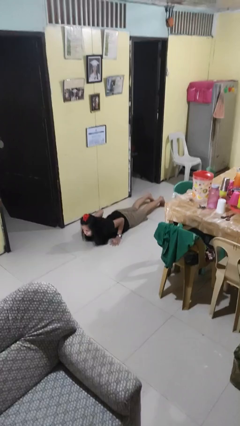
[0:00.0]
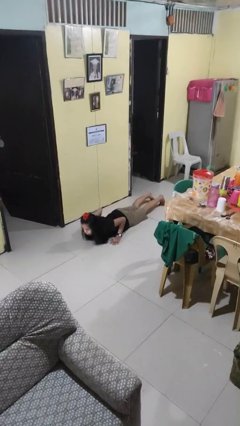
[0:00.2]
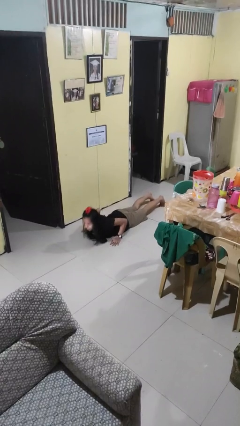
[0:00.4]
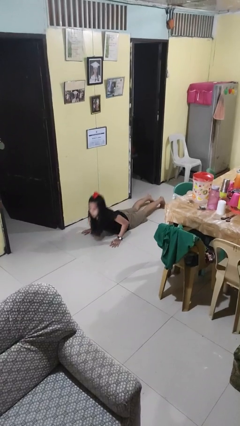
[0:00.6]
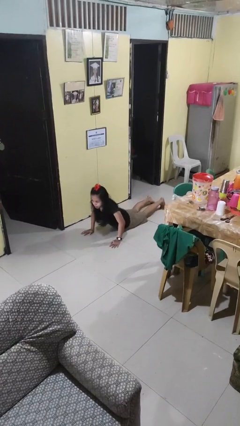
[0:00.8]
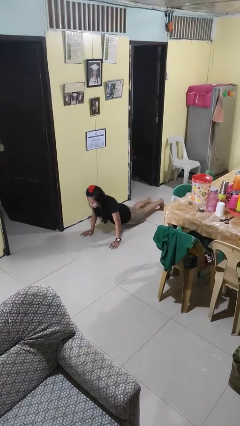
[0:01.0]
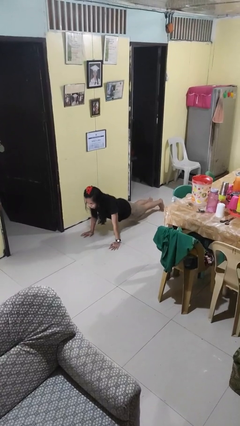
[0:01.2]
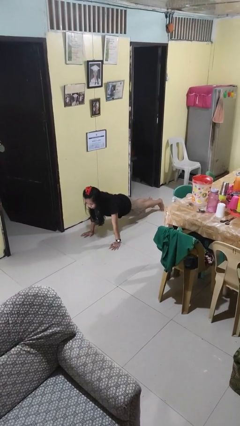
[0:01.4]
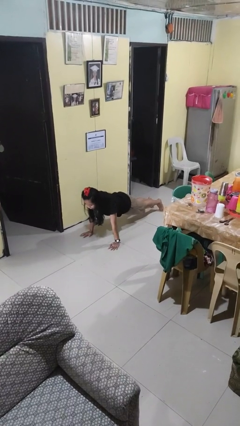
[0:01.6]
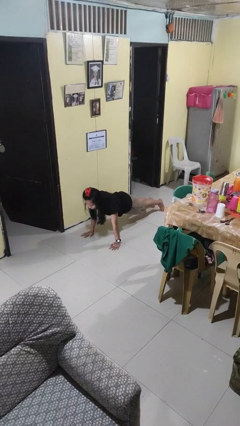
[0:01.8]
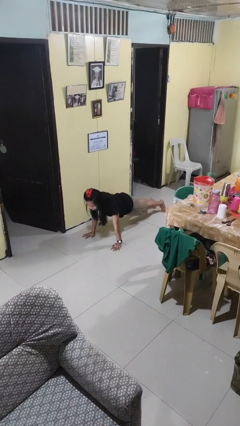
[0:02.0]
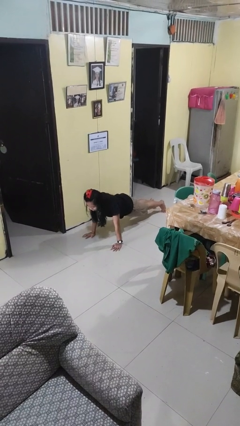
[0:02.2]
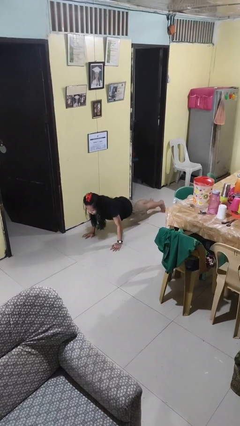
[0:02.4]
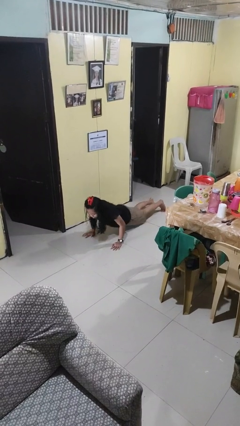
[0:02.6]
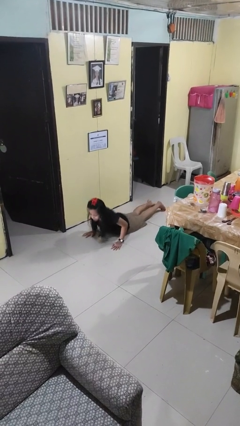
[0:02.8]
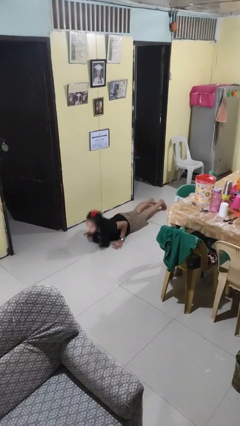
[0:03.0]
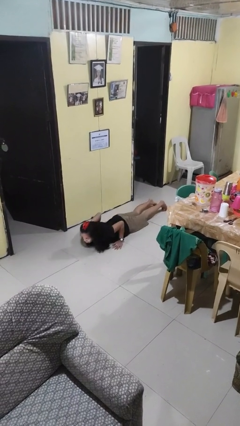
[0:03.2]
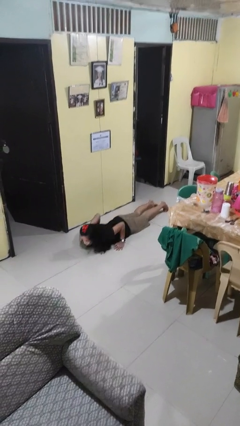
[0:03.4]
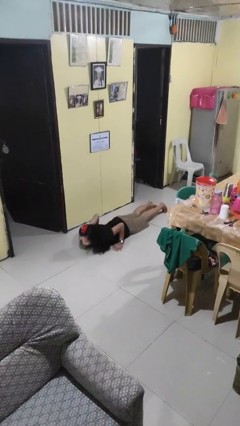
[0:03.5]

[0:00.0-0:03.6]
person exercises with pushup

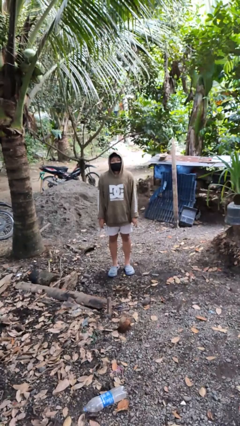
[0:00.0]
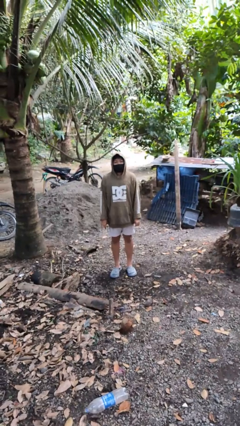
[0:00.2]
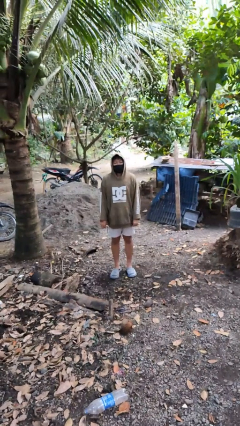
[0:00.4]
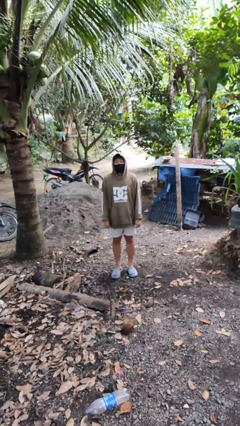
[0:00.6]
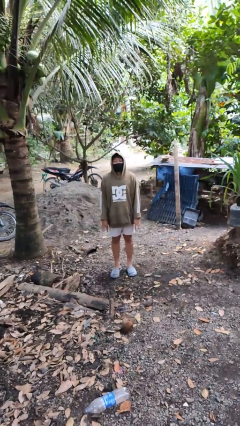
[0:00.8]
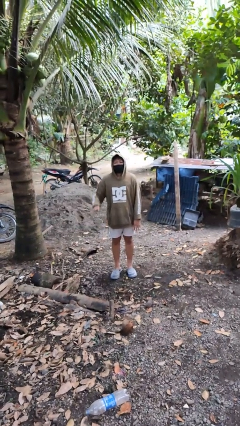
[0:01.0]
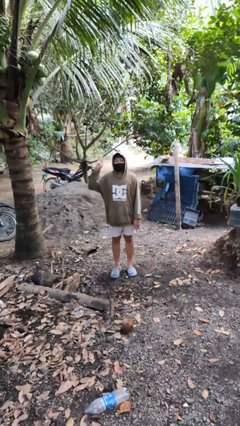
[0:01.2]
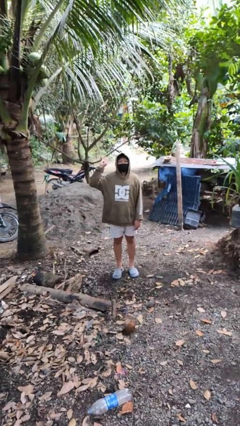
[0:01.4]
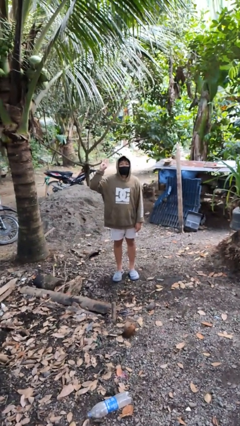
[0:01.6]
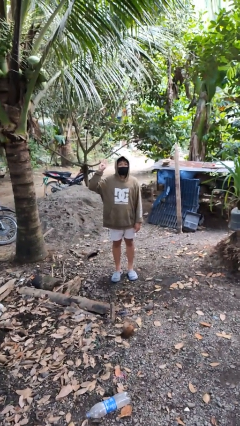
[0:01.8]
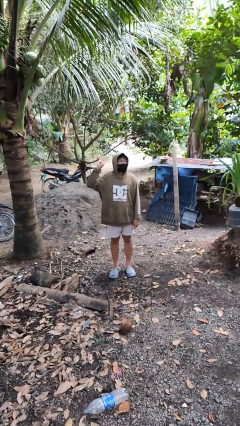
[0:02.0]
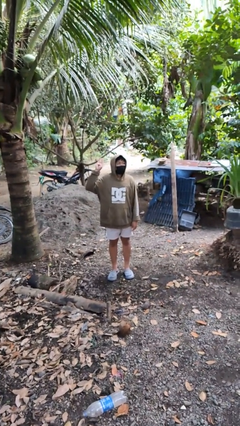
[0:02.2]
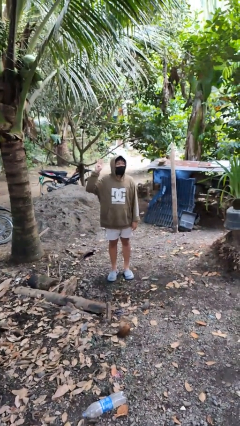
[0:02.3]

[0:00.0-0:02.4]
person gestures number four

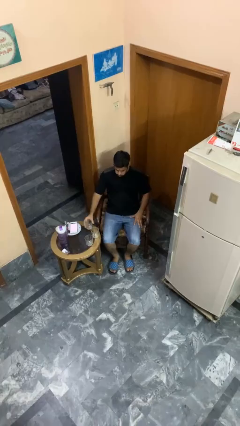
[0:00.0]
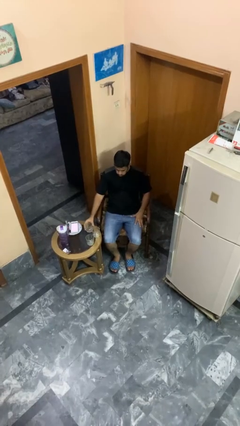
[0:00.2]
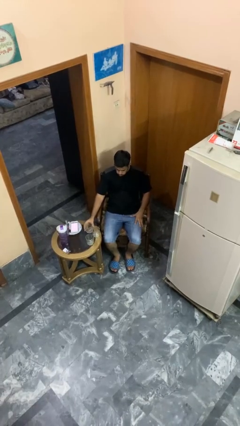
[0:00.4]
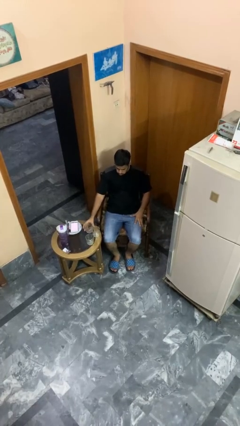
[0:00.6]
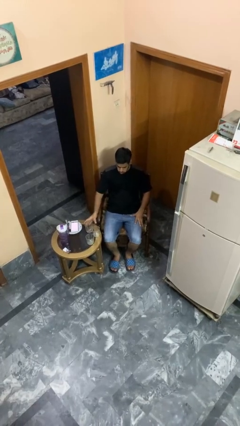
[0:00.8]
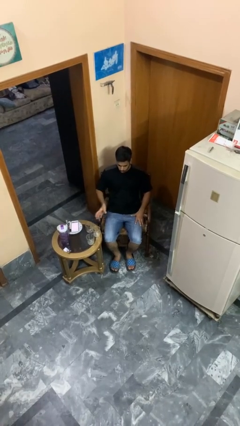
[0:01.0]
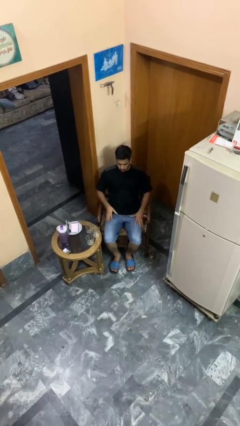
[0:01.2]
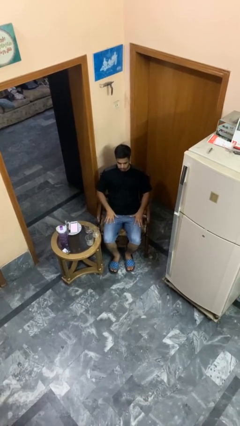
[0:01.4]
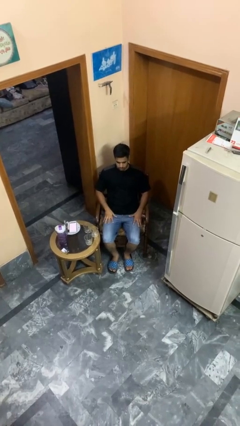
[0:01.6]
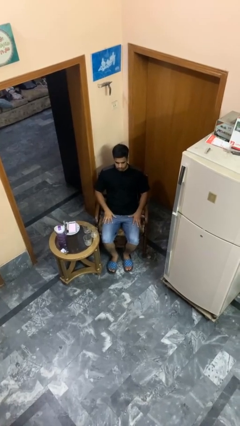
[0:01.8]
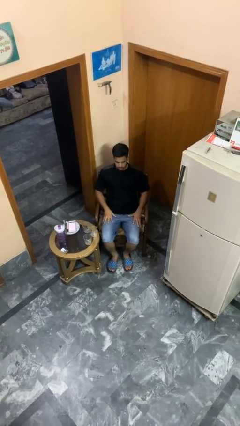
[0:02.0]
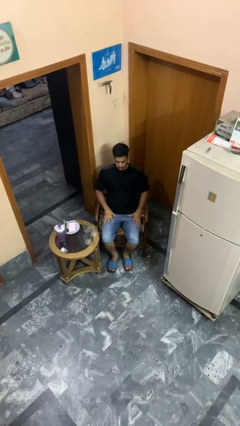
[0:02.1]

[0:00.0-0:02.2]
person puts down object on table

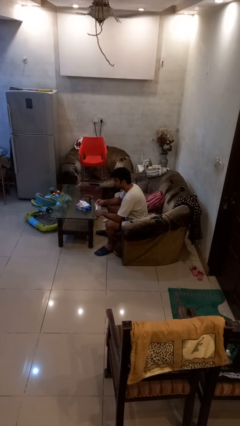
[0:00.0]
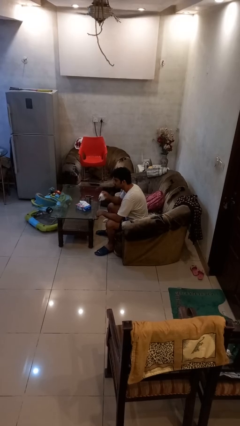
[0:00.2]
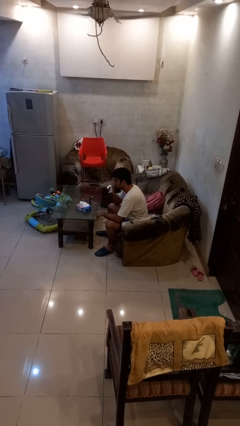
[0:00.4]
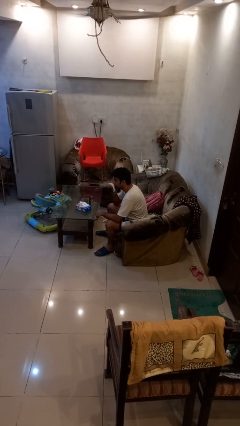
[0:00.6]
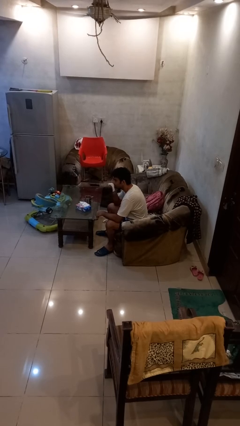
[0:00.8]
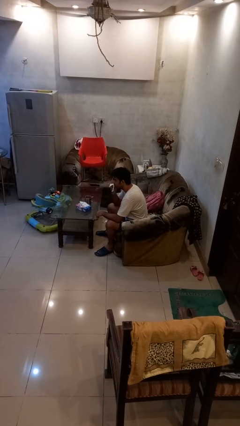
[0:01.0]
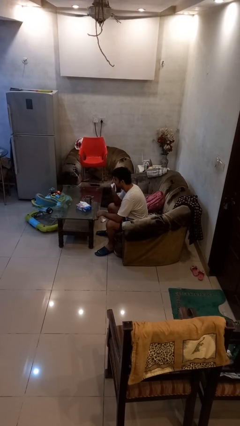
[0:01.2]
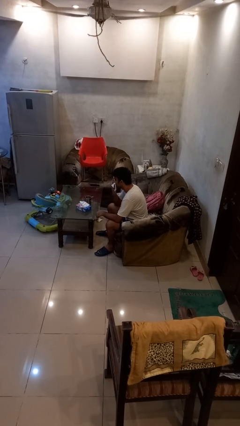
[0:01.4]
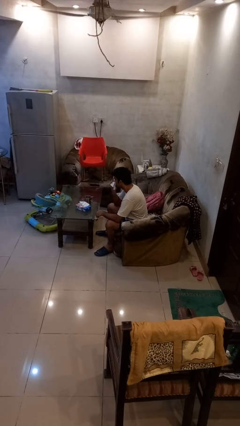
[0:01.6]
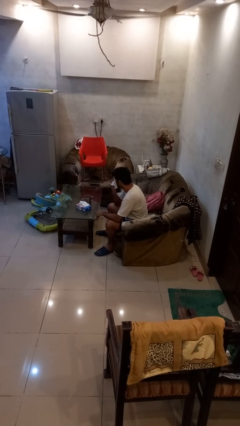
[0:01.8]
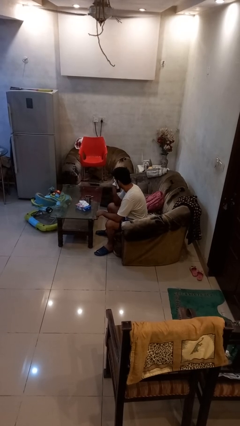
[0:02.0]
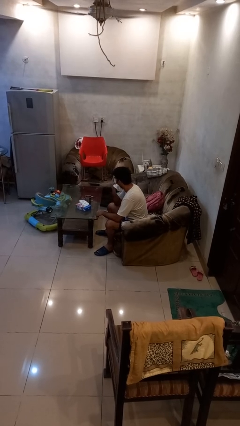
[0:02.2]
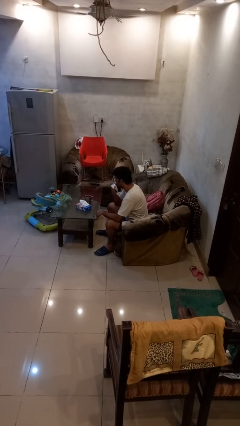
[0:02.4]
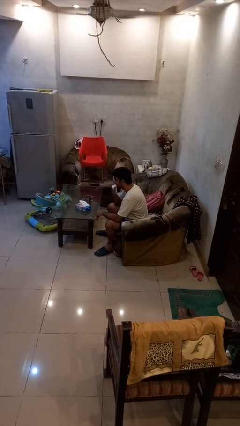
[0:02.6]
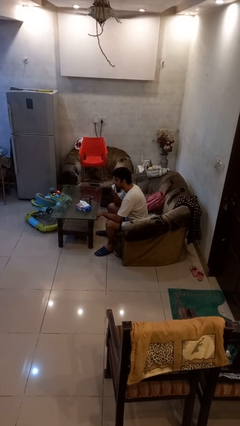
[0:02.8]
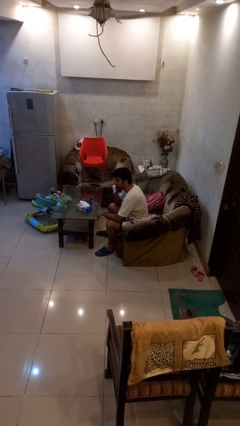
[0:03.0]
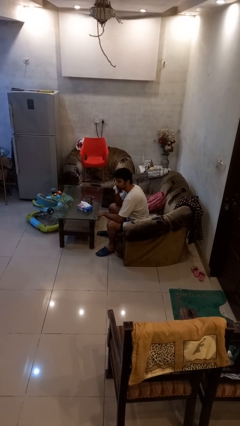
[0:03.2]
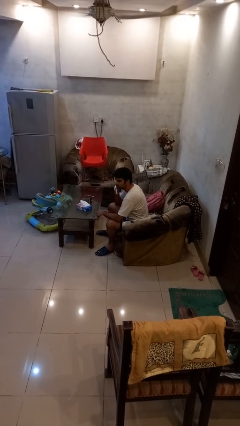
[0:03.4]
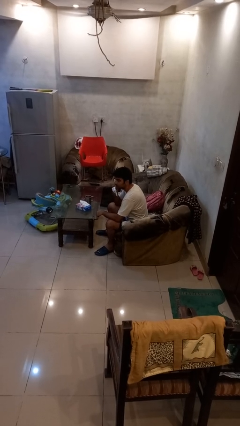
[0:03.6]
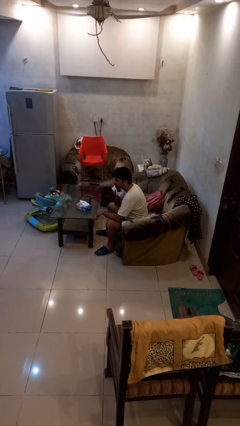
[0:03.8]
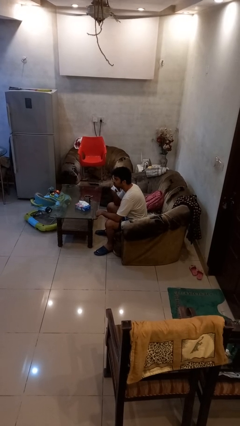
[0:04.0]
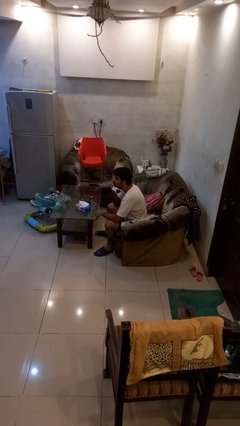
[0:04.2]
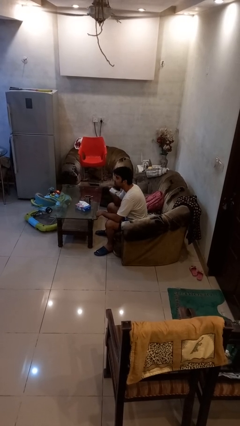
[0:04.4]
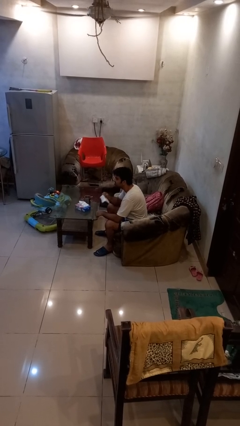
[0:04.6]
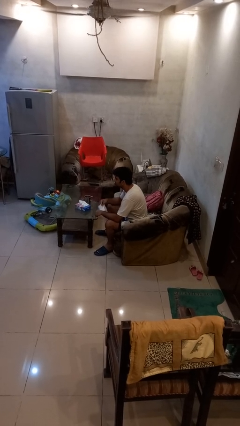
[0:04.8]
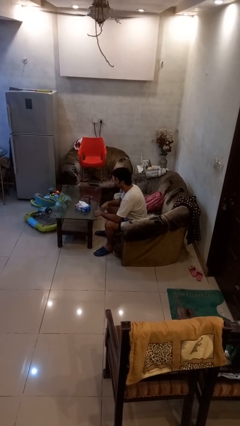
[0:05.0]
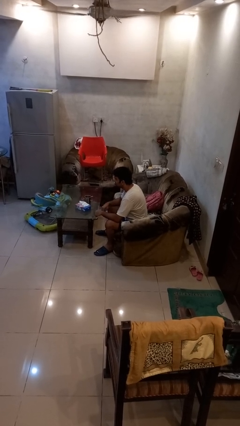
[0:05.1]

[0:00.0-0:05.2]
person wipes mouth with napkin

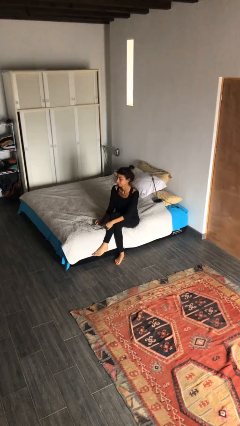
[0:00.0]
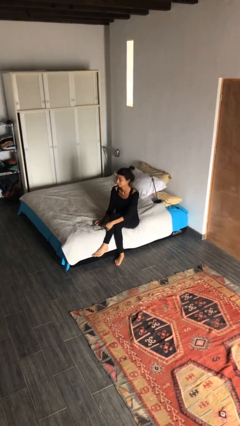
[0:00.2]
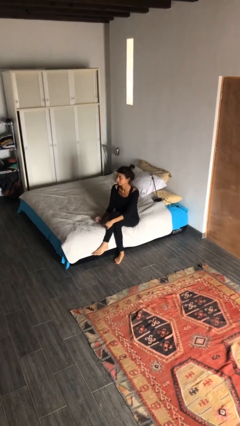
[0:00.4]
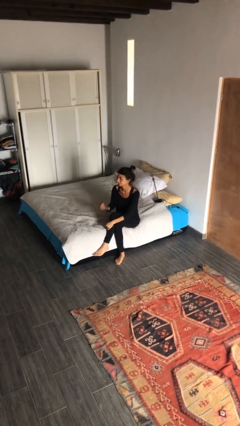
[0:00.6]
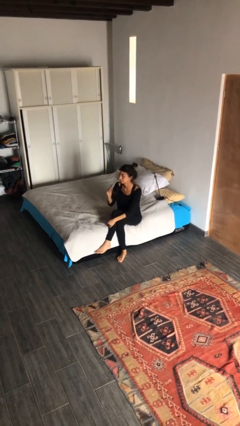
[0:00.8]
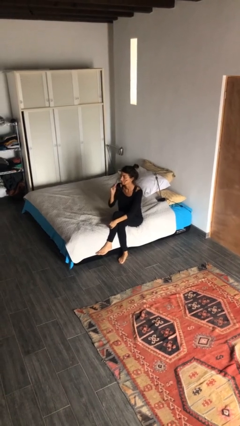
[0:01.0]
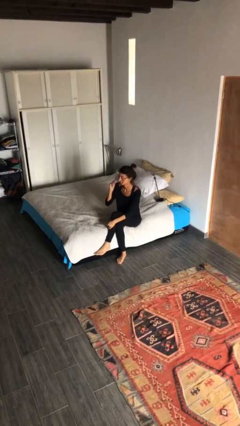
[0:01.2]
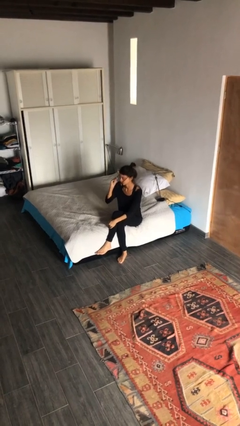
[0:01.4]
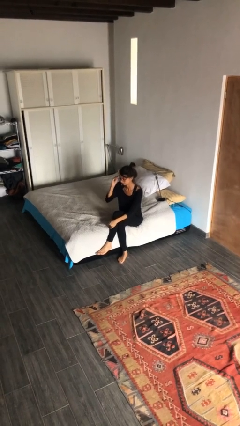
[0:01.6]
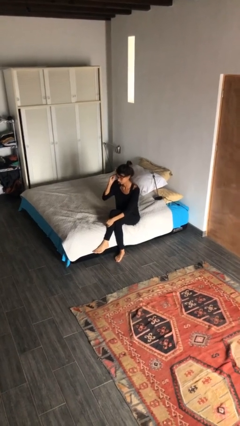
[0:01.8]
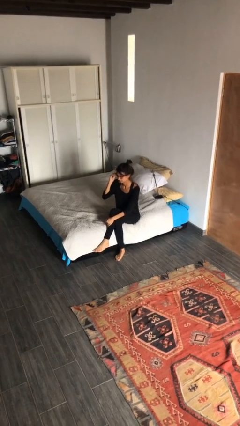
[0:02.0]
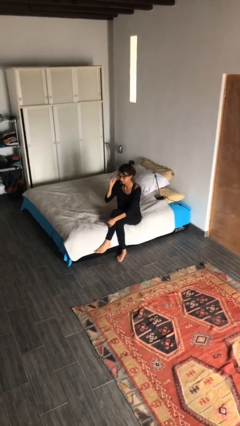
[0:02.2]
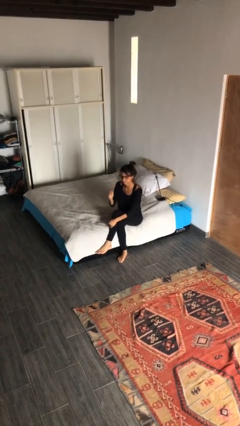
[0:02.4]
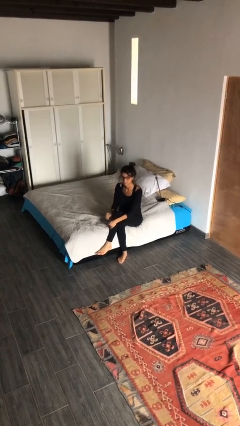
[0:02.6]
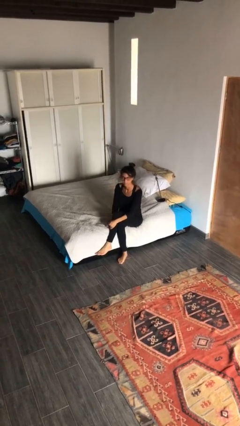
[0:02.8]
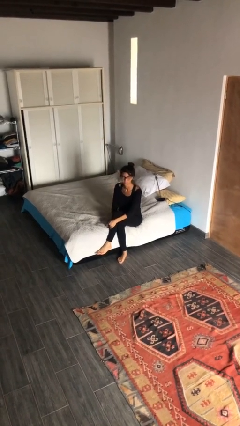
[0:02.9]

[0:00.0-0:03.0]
person puts on glasses

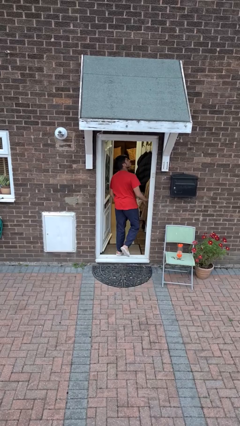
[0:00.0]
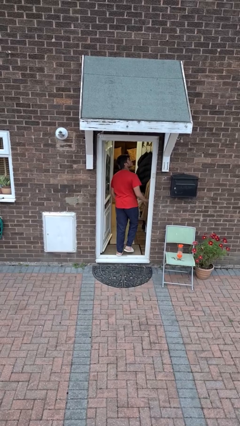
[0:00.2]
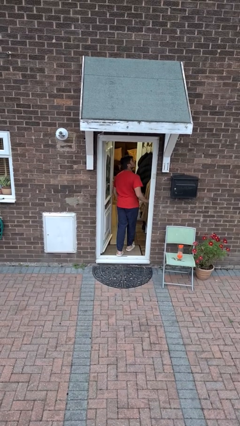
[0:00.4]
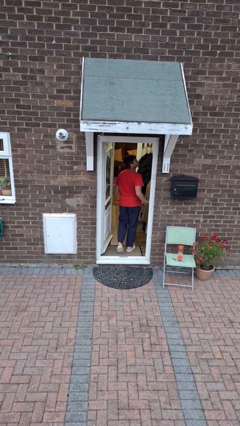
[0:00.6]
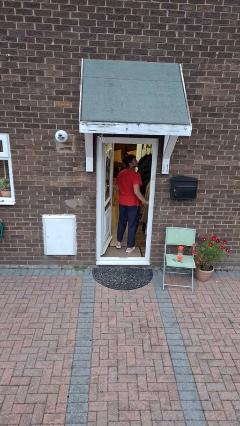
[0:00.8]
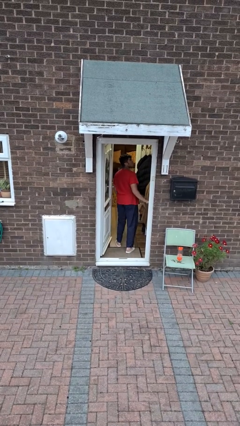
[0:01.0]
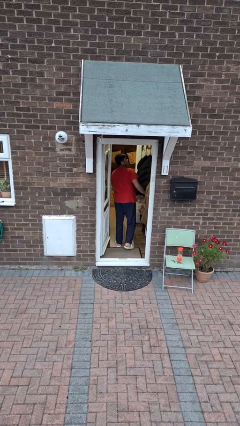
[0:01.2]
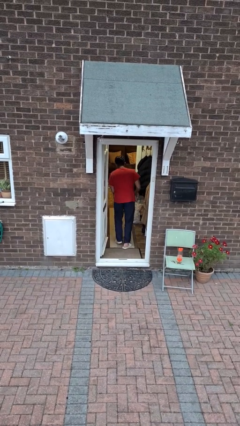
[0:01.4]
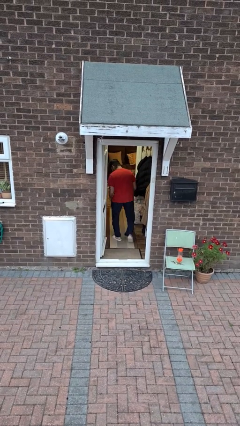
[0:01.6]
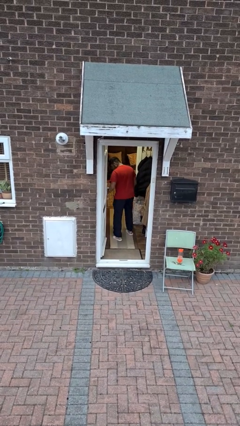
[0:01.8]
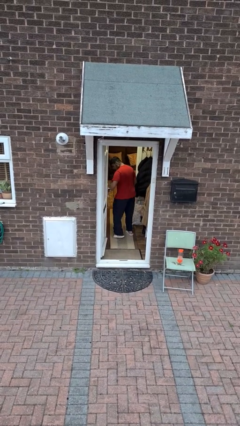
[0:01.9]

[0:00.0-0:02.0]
person bumps into wall
